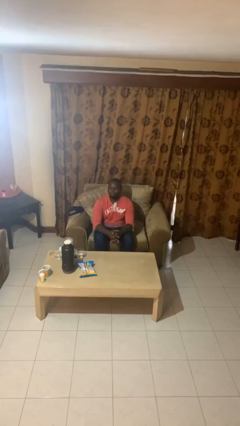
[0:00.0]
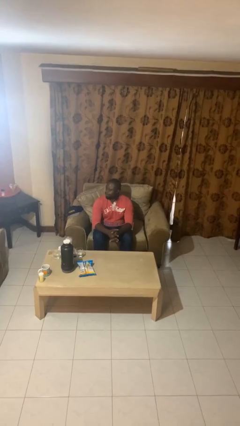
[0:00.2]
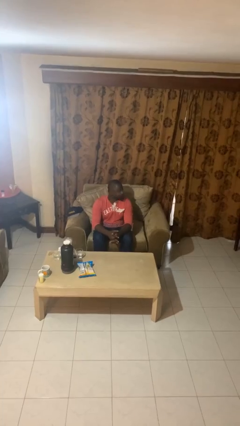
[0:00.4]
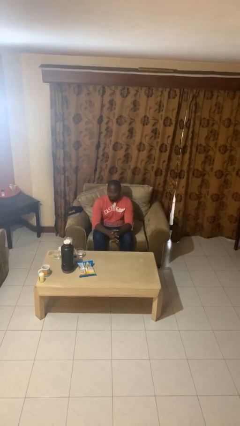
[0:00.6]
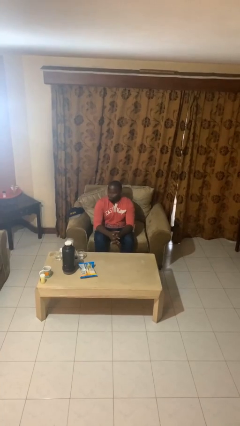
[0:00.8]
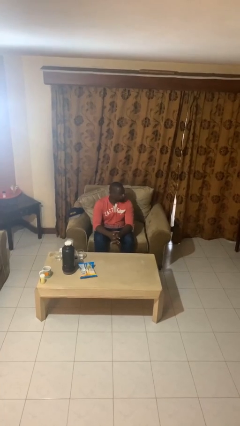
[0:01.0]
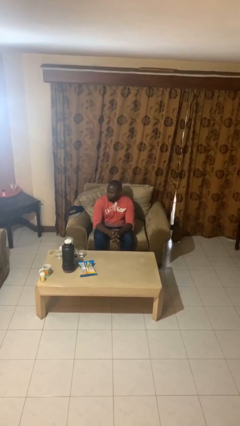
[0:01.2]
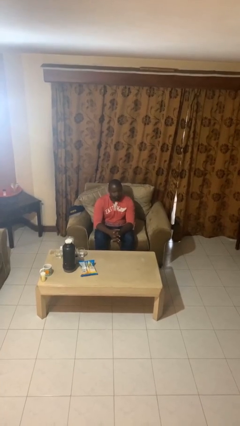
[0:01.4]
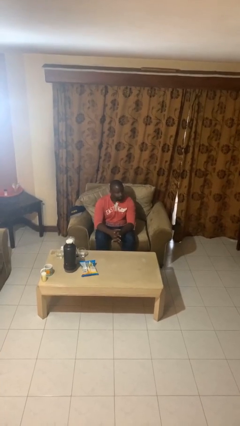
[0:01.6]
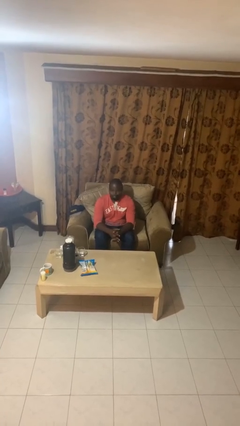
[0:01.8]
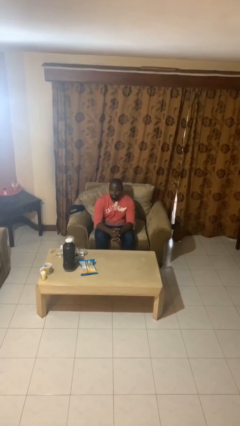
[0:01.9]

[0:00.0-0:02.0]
person shakes head

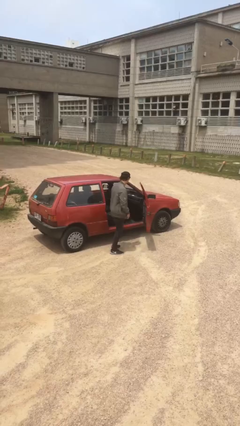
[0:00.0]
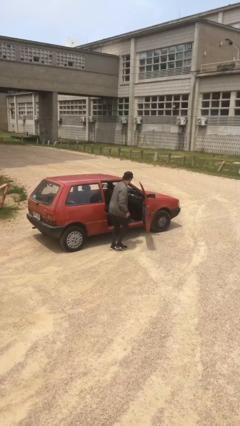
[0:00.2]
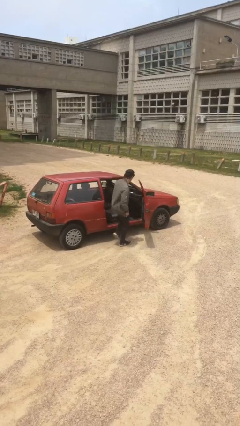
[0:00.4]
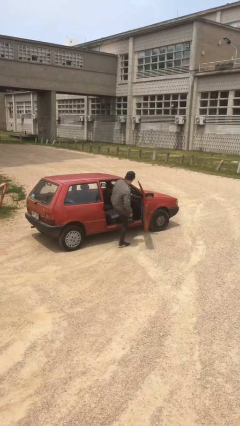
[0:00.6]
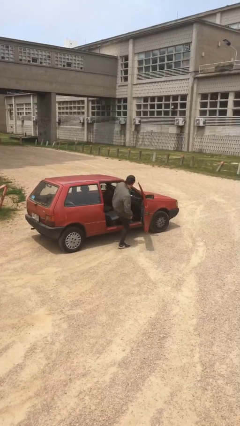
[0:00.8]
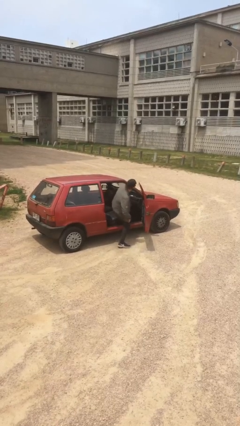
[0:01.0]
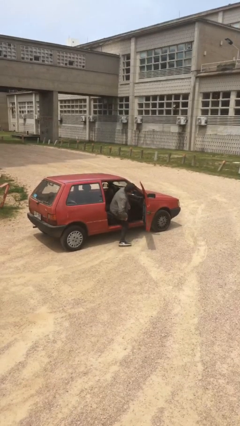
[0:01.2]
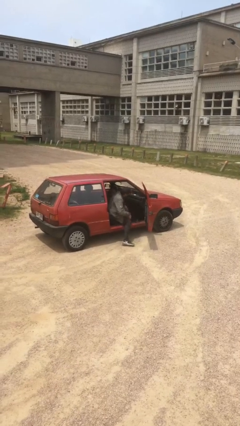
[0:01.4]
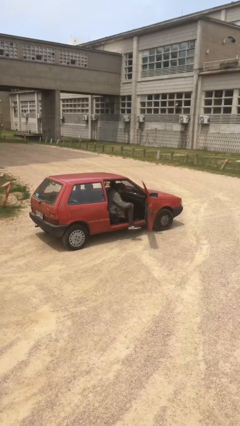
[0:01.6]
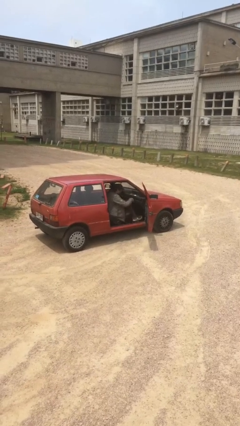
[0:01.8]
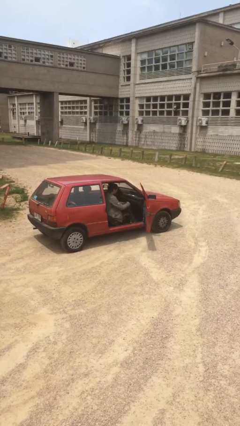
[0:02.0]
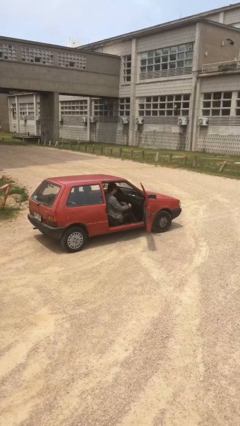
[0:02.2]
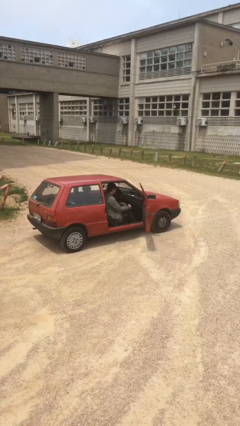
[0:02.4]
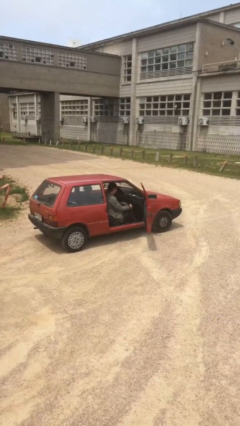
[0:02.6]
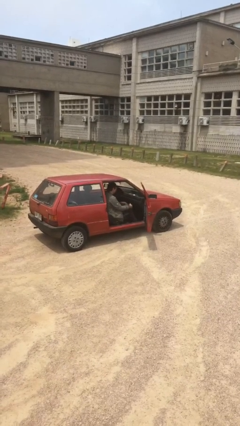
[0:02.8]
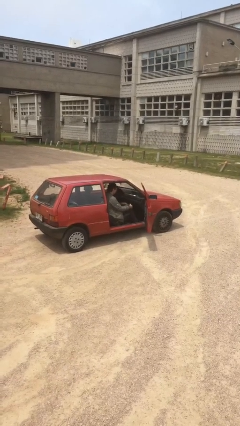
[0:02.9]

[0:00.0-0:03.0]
person enters car

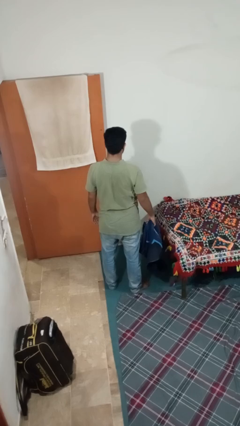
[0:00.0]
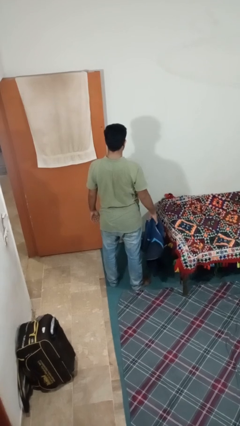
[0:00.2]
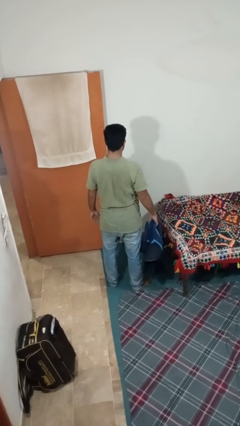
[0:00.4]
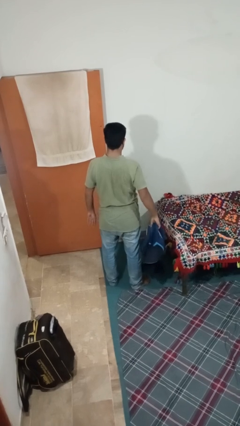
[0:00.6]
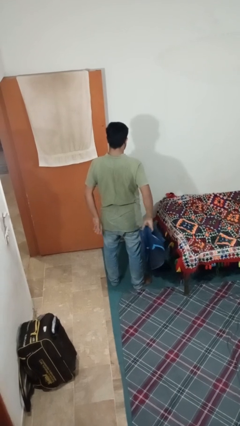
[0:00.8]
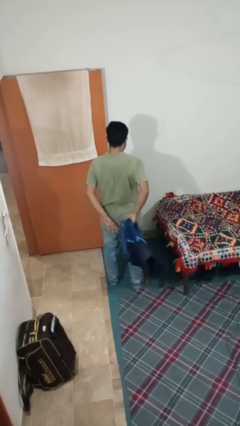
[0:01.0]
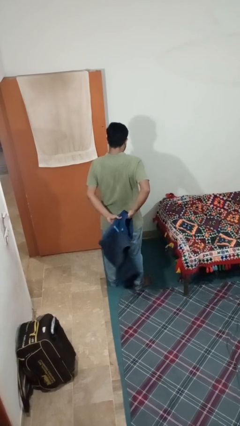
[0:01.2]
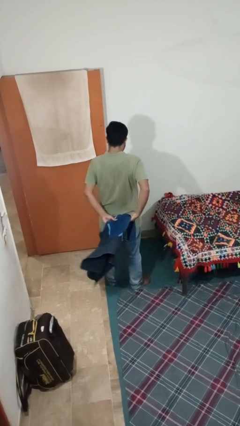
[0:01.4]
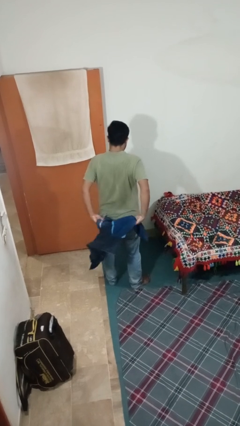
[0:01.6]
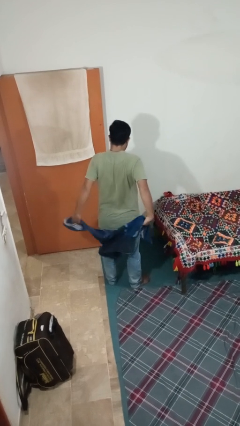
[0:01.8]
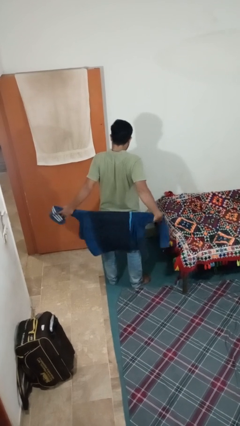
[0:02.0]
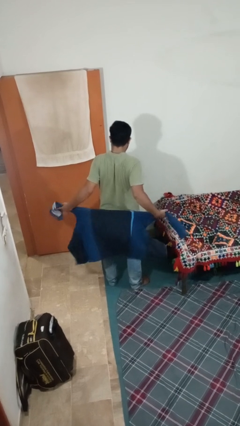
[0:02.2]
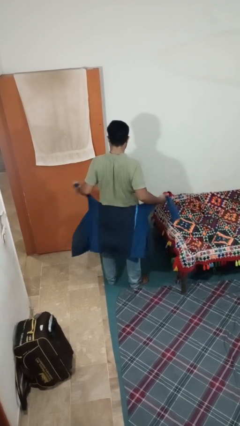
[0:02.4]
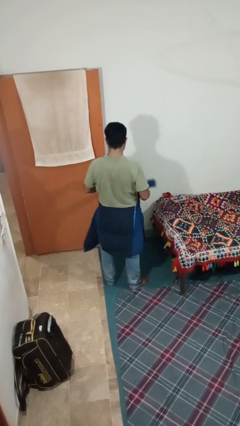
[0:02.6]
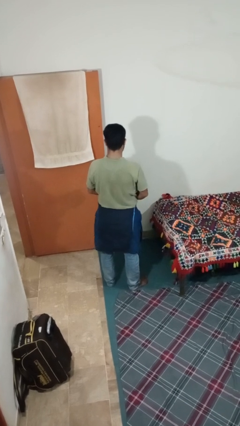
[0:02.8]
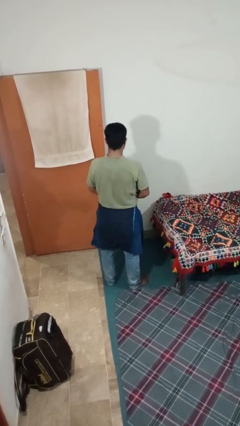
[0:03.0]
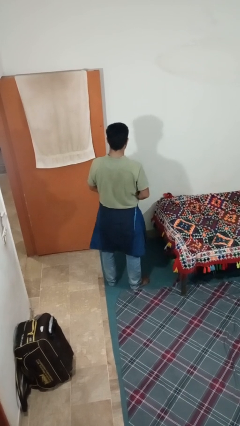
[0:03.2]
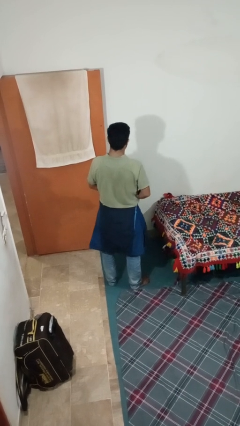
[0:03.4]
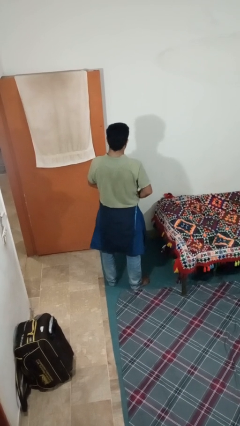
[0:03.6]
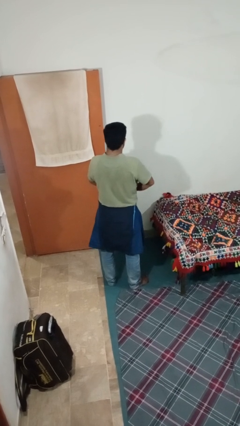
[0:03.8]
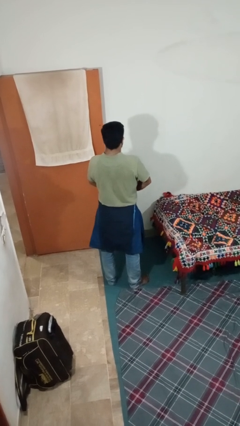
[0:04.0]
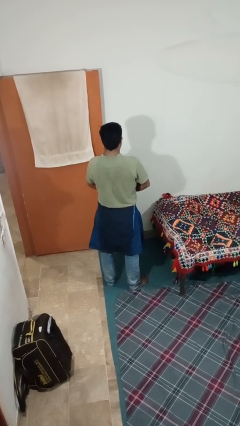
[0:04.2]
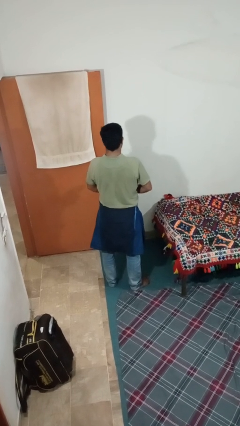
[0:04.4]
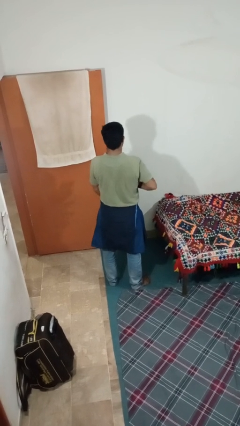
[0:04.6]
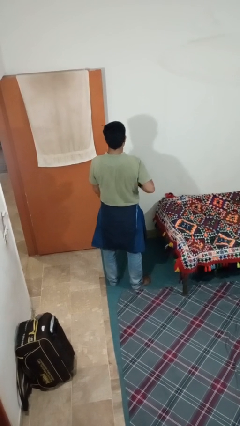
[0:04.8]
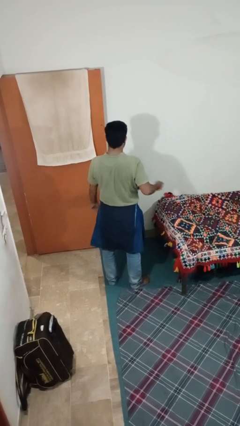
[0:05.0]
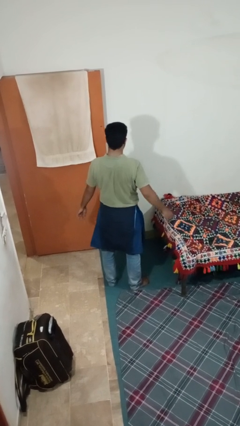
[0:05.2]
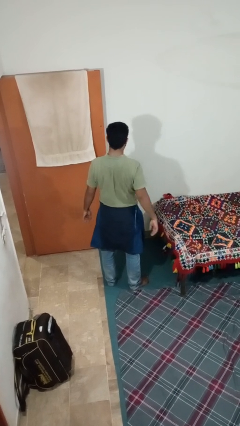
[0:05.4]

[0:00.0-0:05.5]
person ties jacket around waist

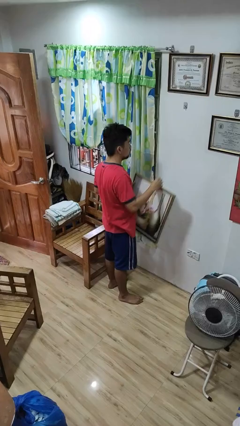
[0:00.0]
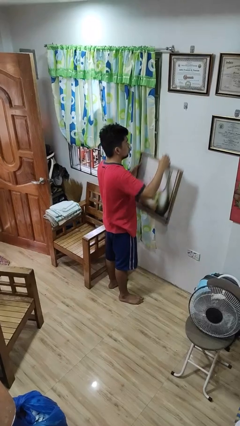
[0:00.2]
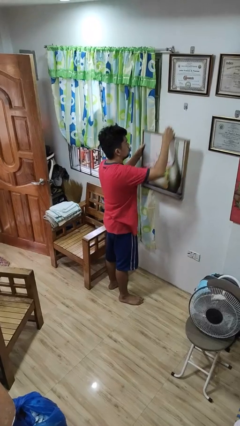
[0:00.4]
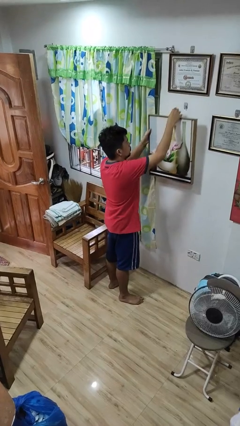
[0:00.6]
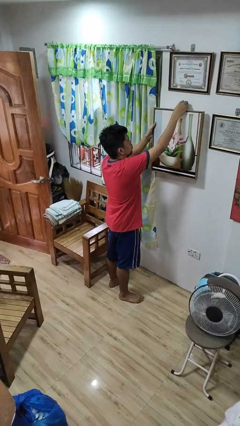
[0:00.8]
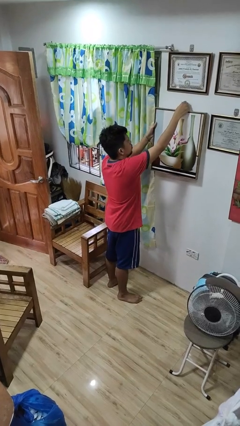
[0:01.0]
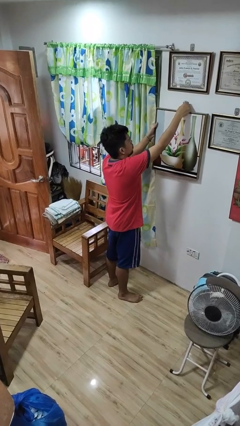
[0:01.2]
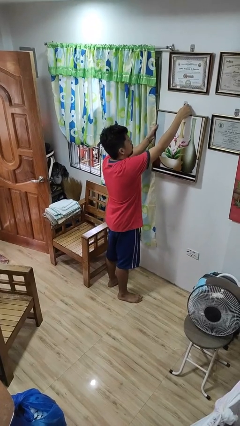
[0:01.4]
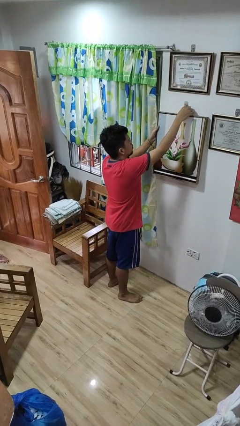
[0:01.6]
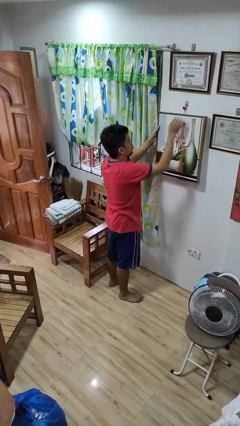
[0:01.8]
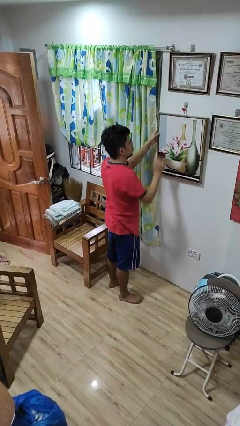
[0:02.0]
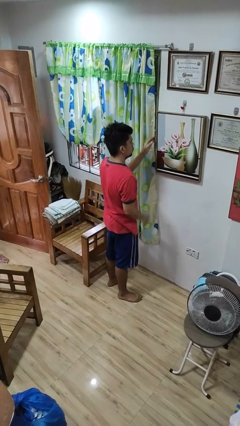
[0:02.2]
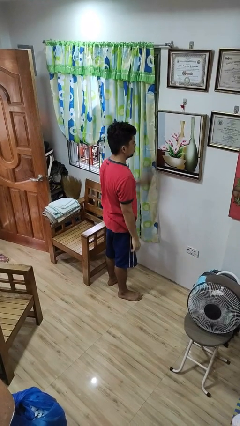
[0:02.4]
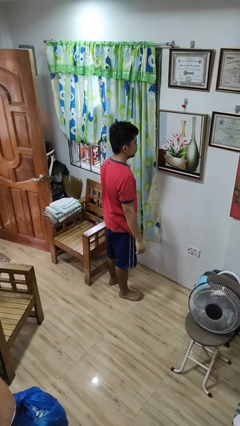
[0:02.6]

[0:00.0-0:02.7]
person puts up picture frame

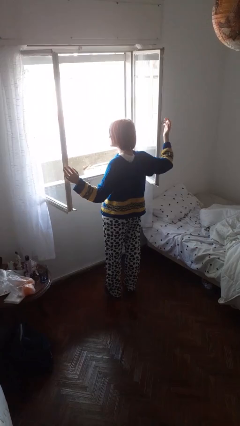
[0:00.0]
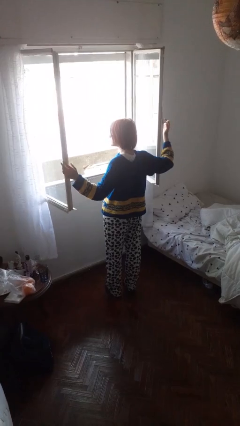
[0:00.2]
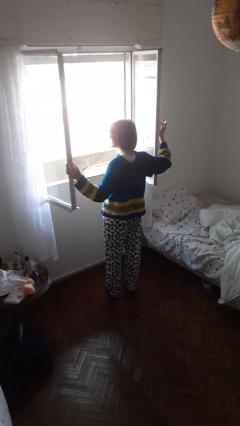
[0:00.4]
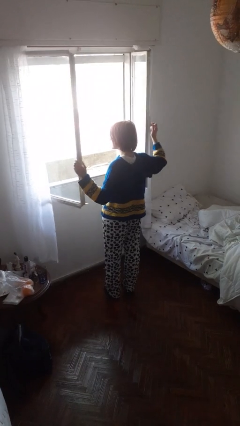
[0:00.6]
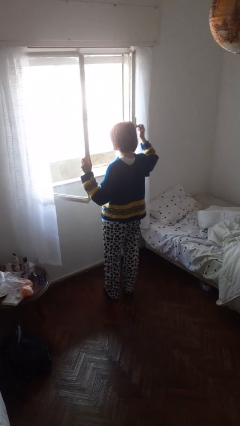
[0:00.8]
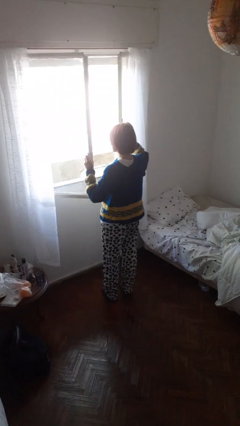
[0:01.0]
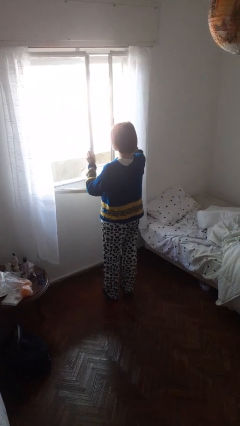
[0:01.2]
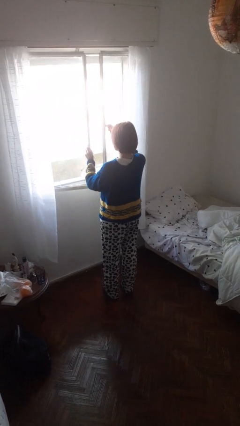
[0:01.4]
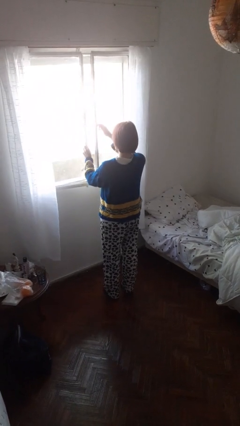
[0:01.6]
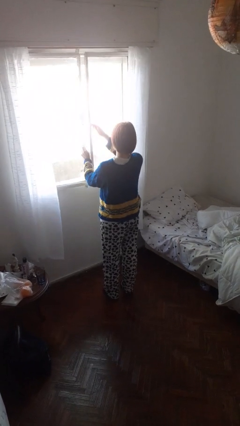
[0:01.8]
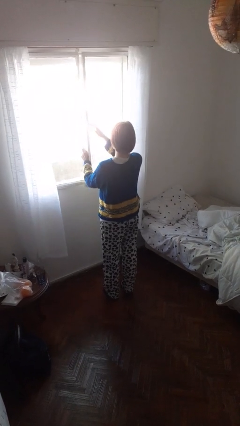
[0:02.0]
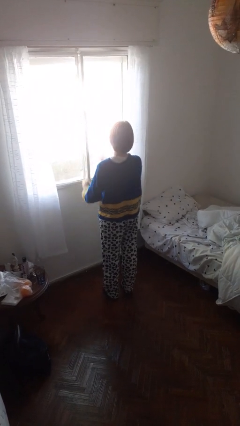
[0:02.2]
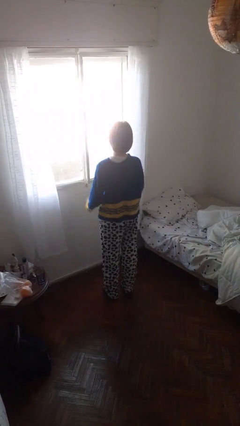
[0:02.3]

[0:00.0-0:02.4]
person closes home window

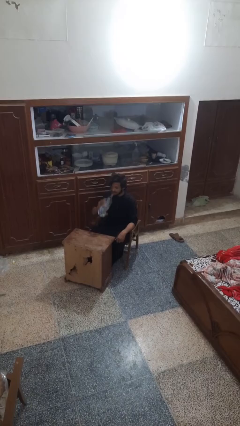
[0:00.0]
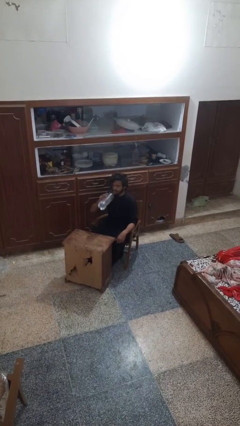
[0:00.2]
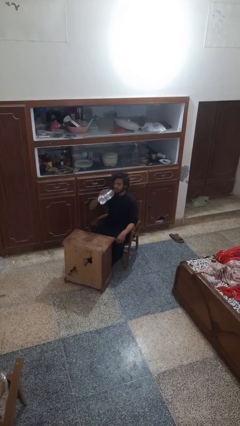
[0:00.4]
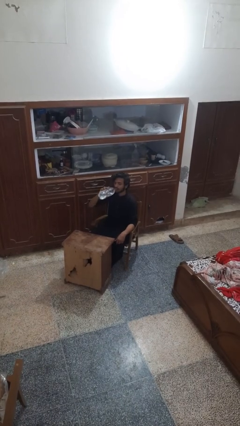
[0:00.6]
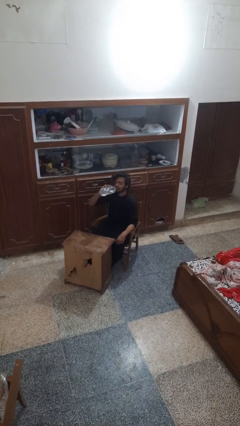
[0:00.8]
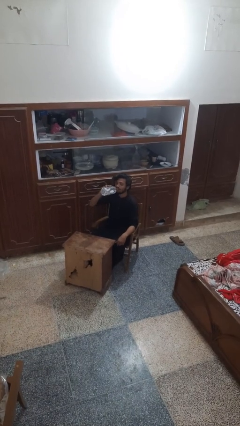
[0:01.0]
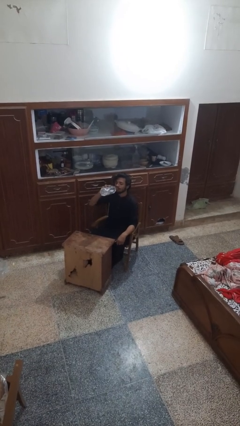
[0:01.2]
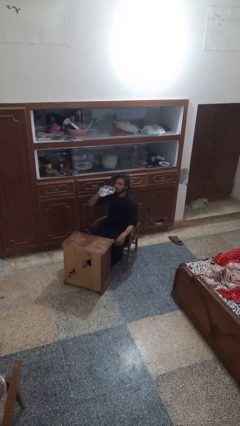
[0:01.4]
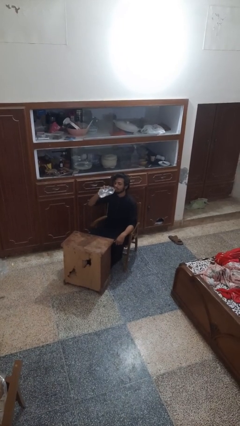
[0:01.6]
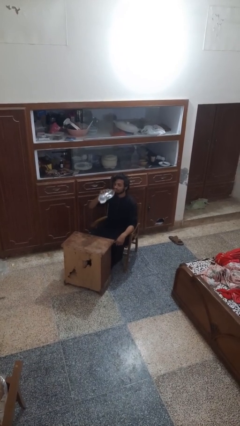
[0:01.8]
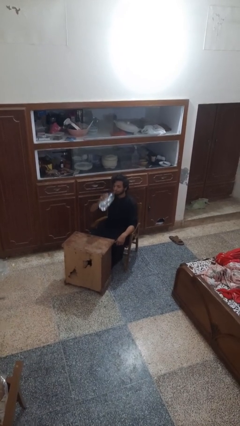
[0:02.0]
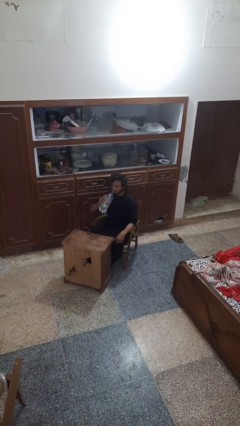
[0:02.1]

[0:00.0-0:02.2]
person drinks from bottle
